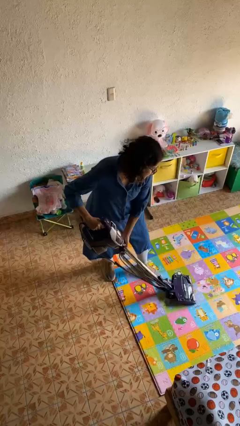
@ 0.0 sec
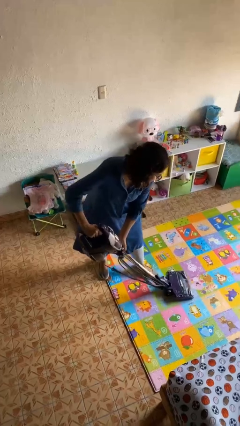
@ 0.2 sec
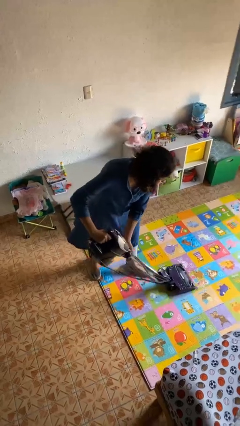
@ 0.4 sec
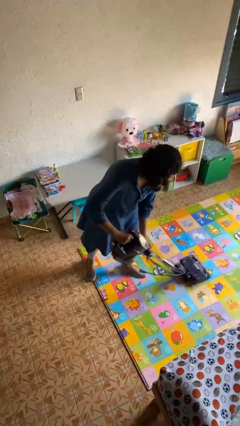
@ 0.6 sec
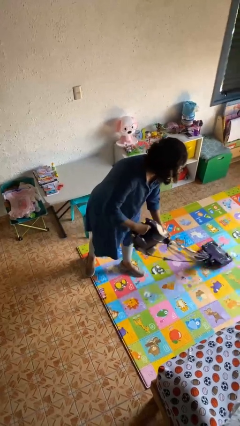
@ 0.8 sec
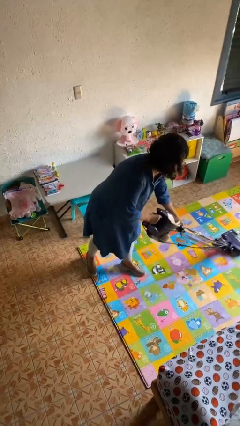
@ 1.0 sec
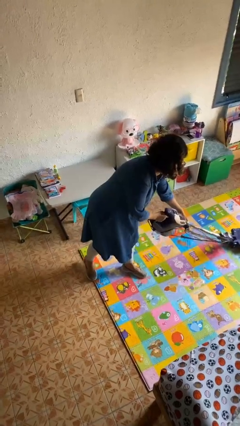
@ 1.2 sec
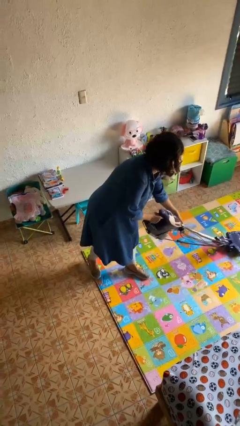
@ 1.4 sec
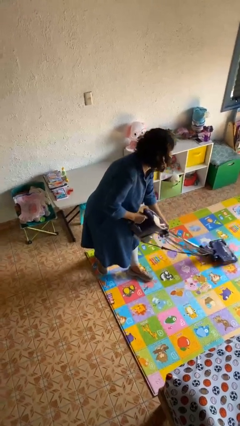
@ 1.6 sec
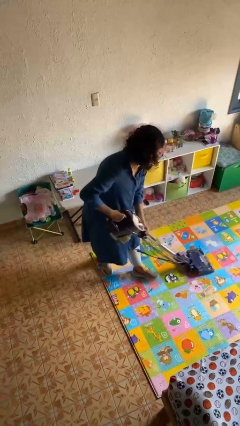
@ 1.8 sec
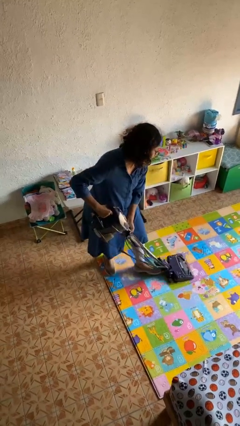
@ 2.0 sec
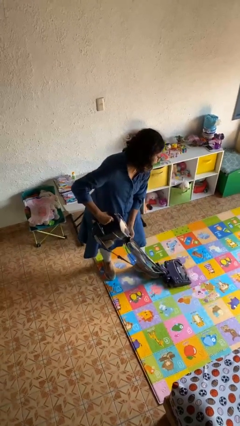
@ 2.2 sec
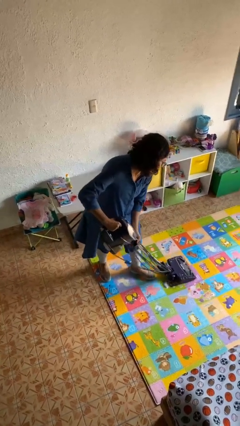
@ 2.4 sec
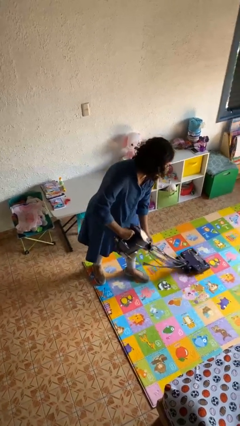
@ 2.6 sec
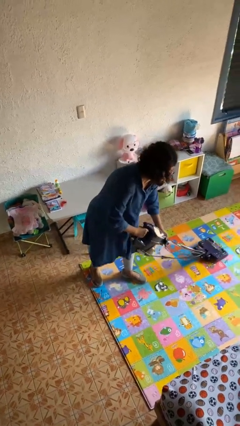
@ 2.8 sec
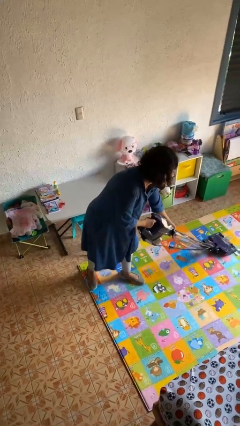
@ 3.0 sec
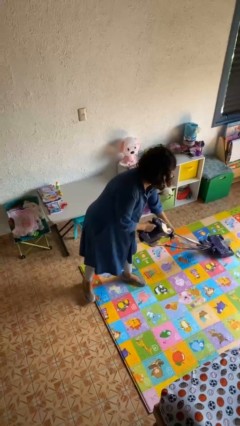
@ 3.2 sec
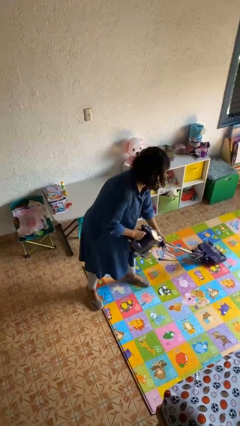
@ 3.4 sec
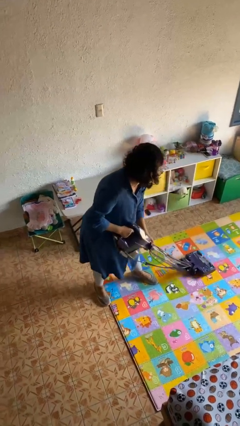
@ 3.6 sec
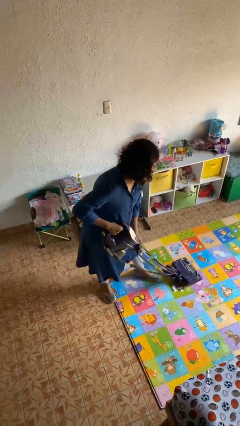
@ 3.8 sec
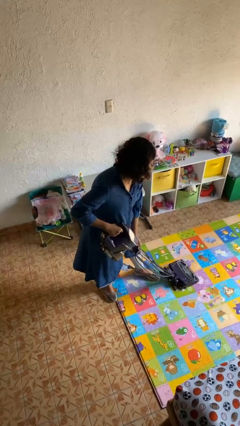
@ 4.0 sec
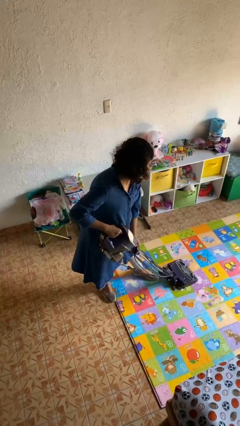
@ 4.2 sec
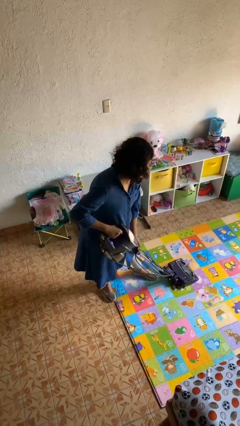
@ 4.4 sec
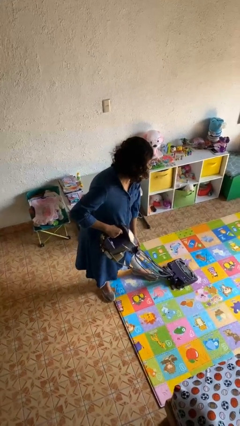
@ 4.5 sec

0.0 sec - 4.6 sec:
person vacuums carpet

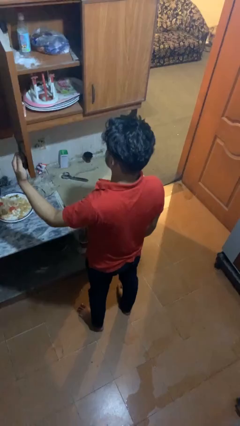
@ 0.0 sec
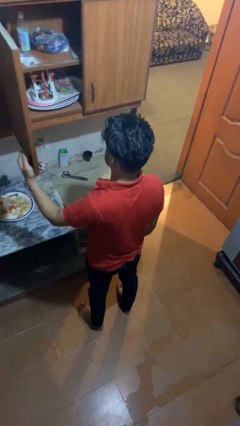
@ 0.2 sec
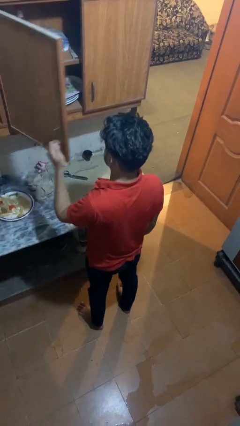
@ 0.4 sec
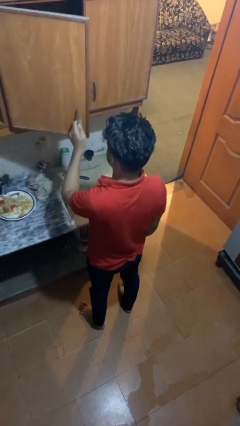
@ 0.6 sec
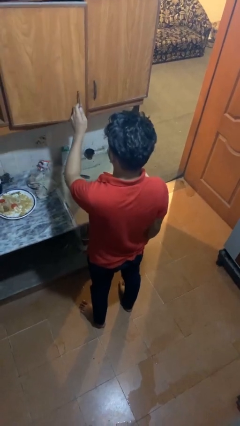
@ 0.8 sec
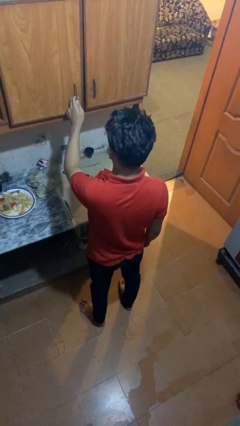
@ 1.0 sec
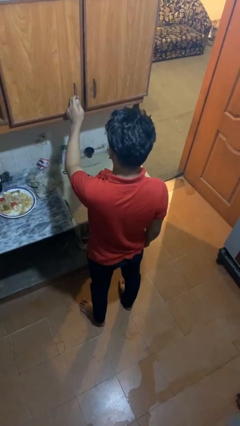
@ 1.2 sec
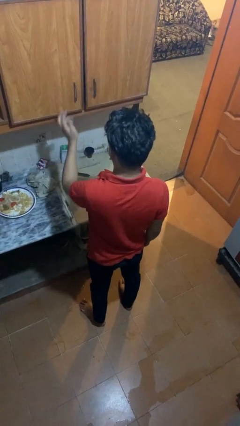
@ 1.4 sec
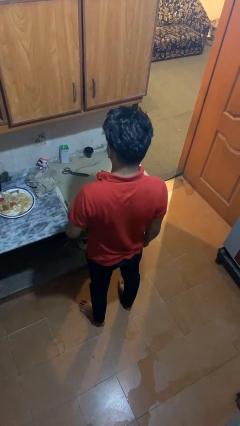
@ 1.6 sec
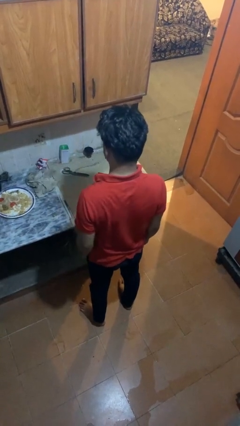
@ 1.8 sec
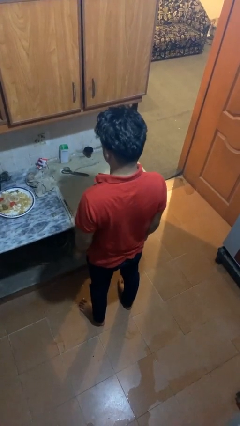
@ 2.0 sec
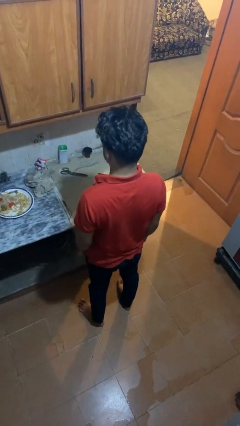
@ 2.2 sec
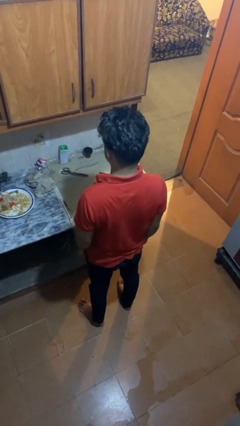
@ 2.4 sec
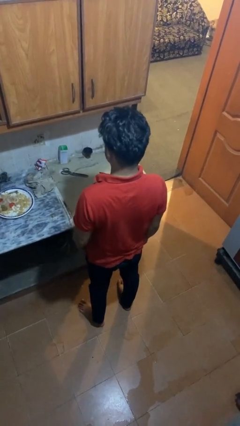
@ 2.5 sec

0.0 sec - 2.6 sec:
person closes cabinet

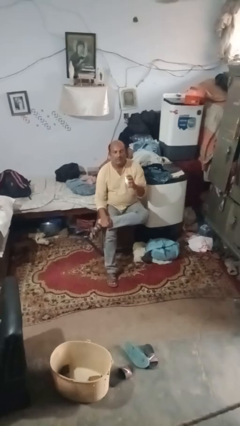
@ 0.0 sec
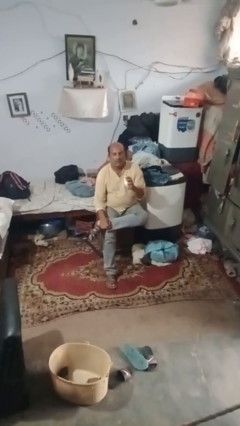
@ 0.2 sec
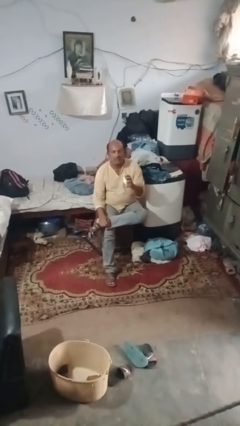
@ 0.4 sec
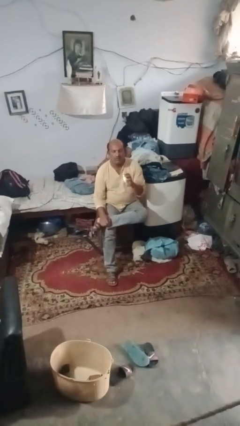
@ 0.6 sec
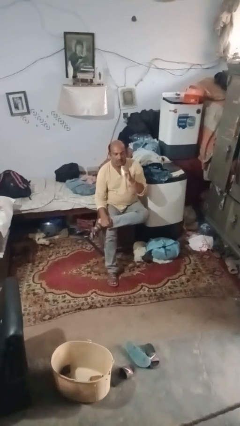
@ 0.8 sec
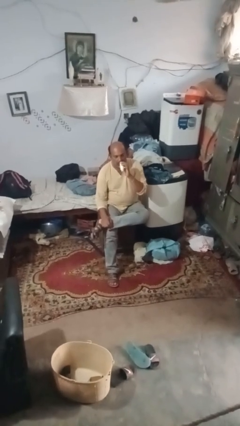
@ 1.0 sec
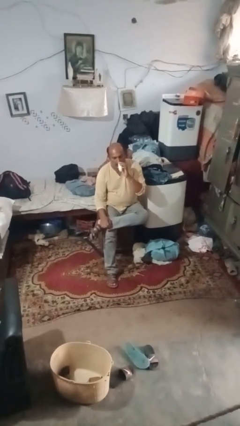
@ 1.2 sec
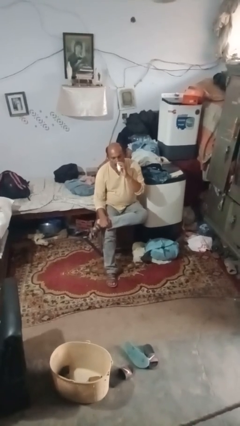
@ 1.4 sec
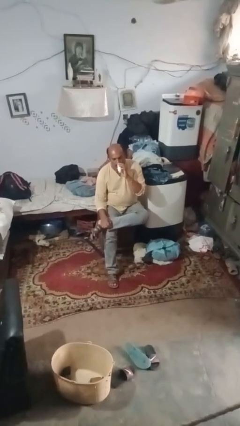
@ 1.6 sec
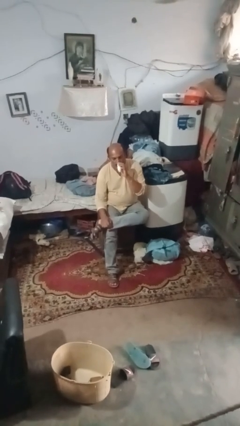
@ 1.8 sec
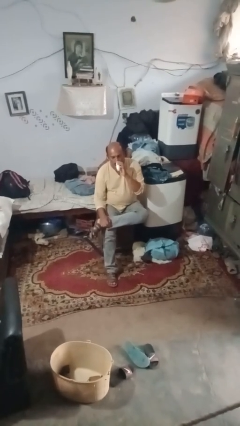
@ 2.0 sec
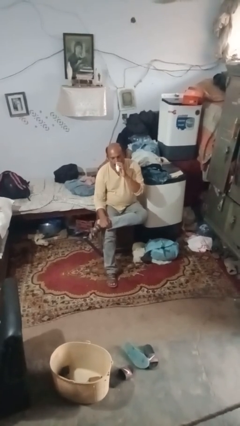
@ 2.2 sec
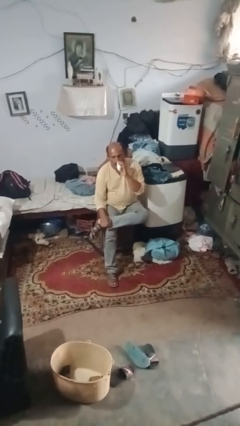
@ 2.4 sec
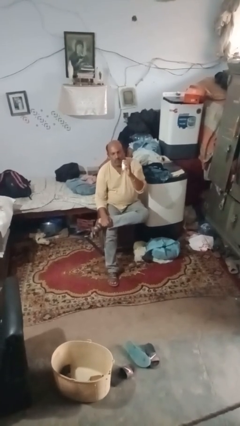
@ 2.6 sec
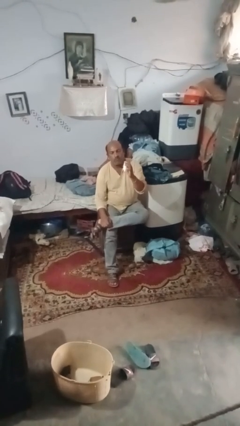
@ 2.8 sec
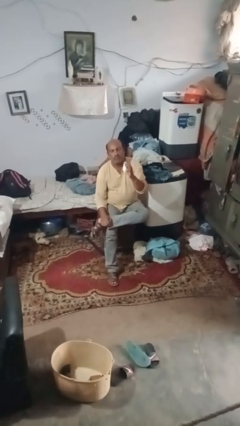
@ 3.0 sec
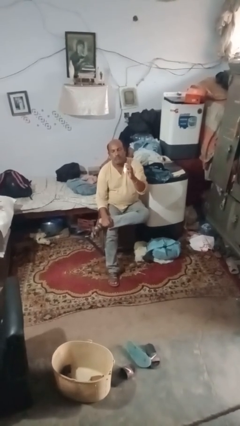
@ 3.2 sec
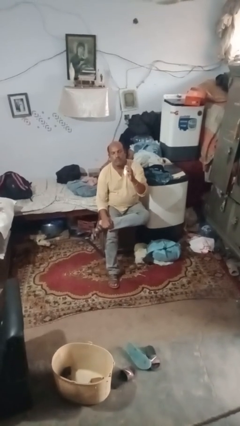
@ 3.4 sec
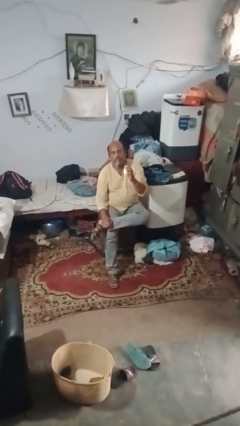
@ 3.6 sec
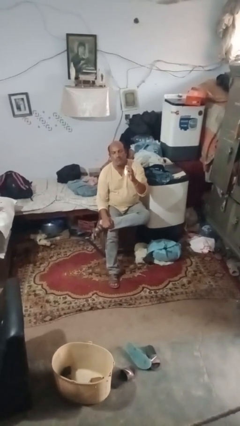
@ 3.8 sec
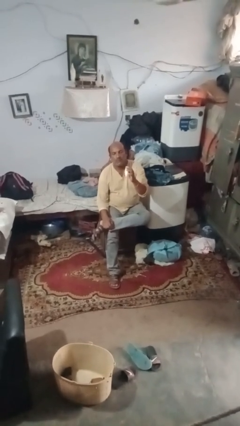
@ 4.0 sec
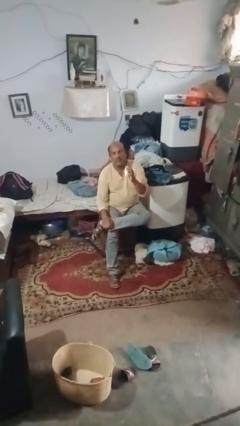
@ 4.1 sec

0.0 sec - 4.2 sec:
person vapes

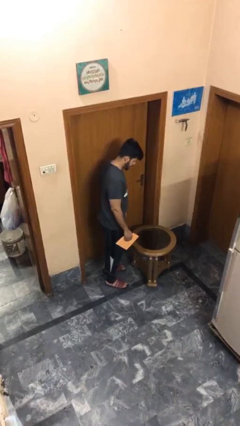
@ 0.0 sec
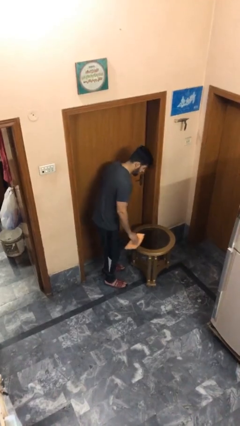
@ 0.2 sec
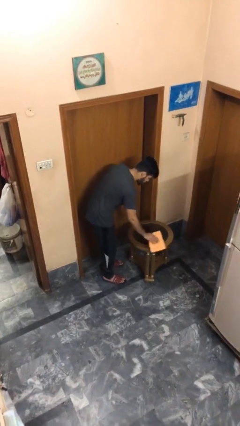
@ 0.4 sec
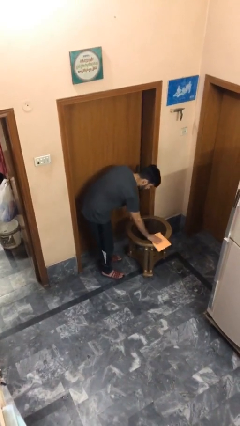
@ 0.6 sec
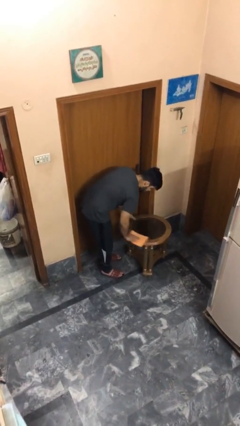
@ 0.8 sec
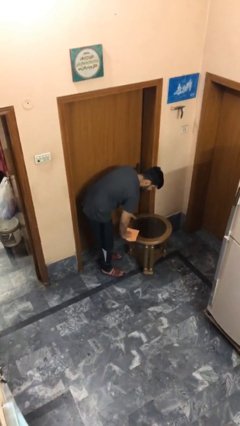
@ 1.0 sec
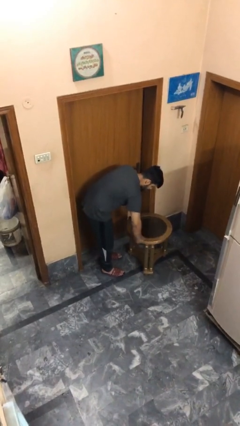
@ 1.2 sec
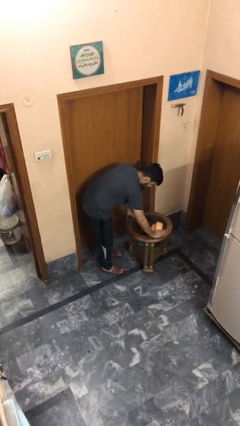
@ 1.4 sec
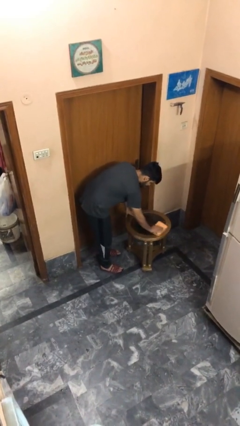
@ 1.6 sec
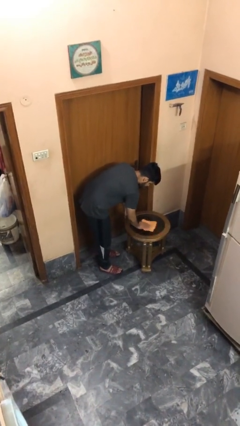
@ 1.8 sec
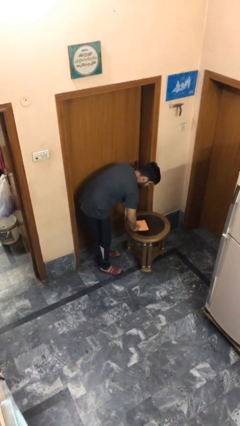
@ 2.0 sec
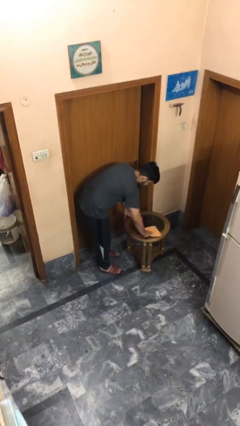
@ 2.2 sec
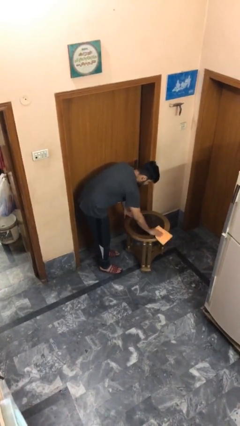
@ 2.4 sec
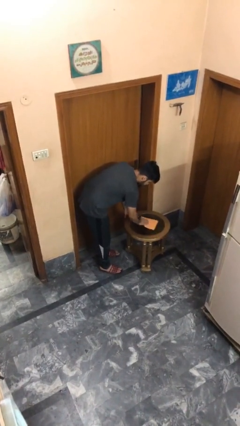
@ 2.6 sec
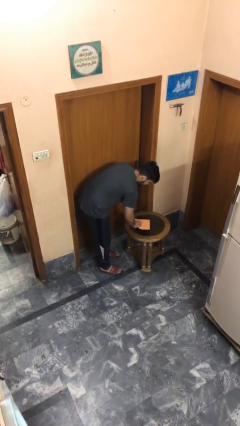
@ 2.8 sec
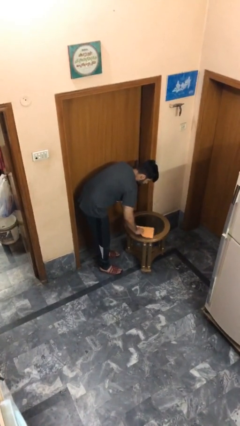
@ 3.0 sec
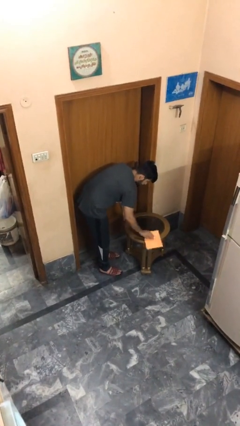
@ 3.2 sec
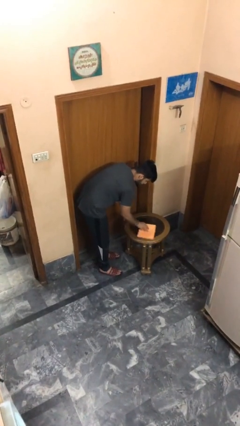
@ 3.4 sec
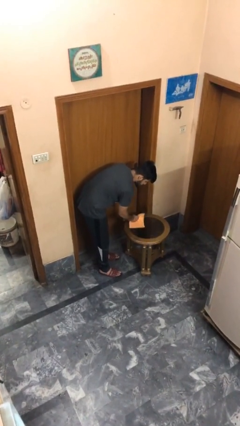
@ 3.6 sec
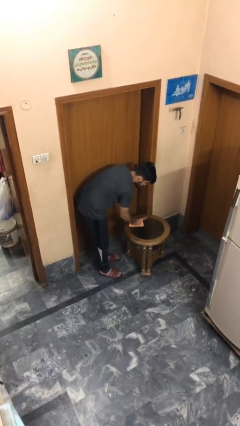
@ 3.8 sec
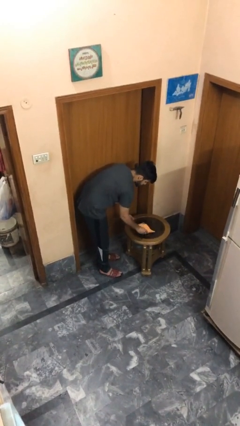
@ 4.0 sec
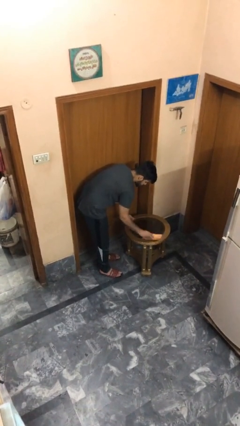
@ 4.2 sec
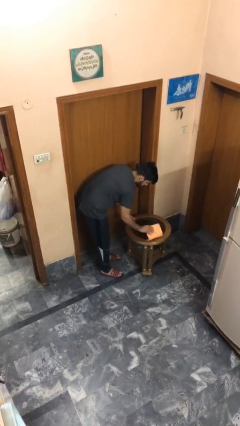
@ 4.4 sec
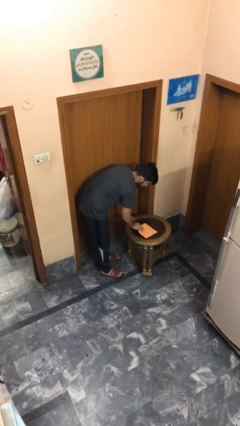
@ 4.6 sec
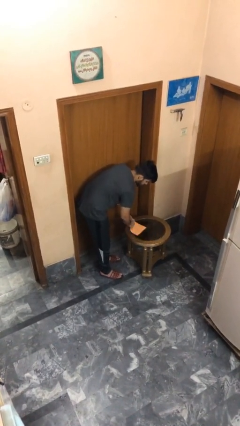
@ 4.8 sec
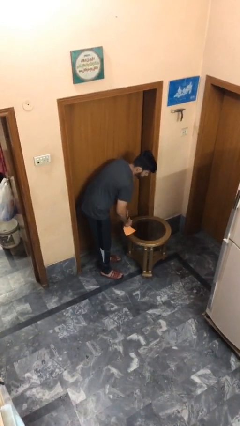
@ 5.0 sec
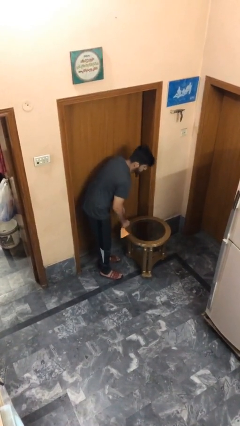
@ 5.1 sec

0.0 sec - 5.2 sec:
person cleans table with rag

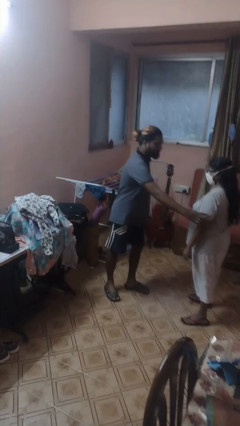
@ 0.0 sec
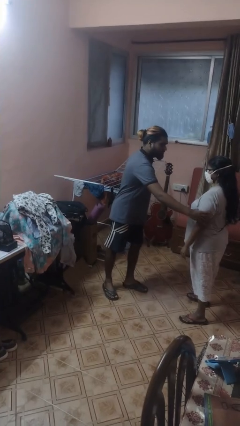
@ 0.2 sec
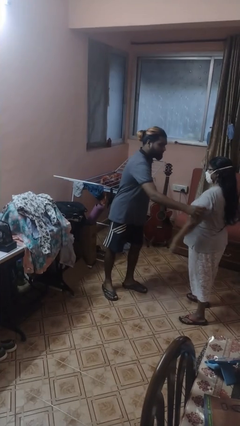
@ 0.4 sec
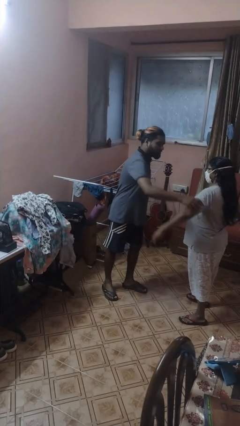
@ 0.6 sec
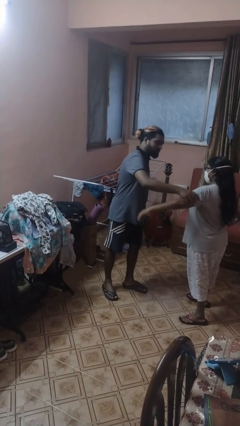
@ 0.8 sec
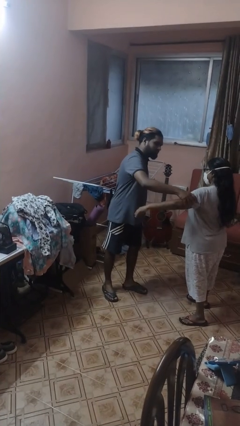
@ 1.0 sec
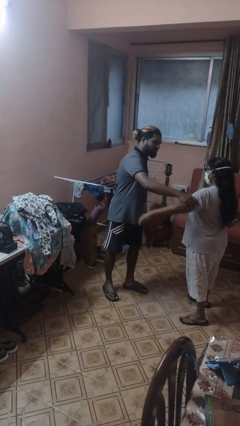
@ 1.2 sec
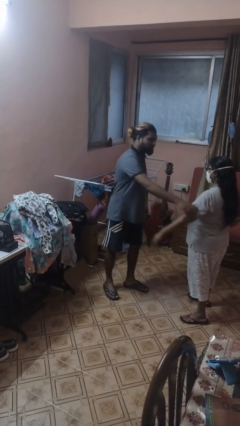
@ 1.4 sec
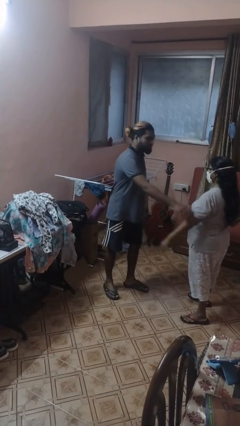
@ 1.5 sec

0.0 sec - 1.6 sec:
person grabs person by bicep
